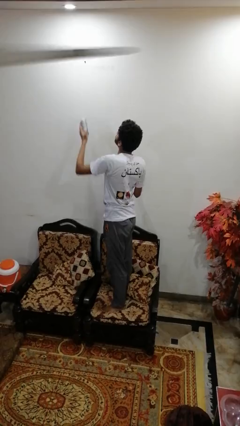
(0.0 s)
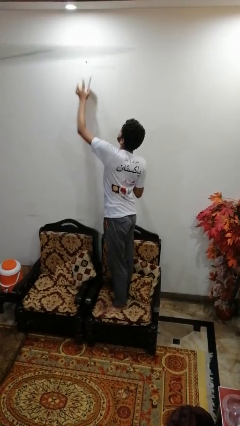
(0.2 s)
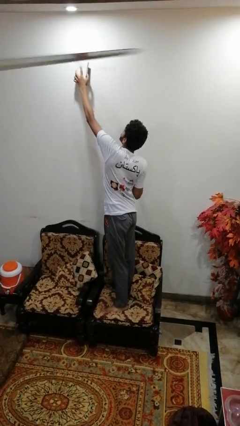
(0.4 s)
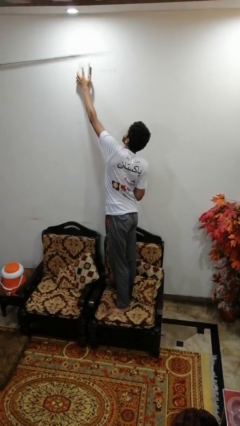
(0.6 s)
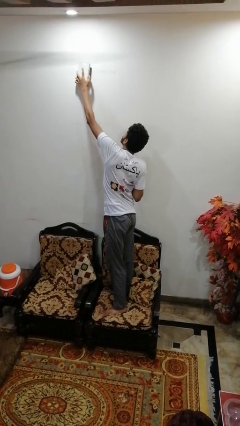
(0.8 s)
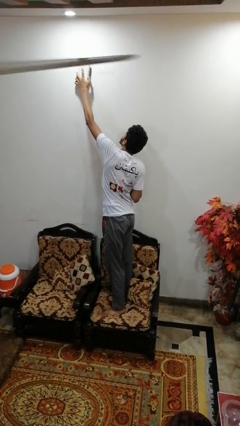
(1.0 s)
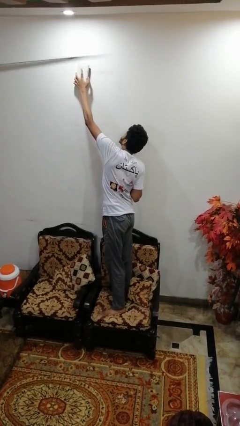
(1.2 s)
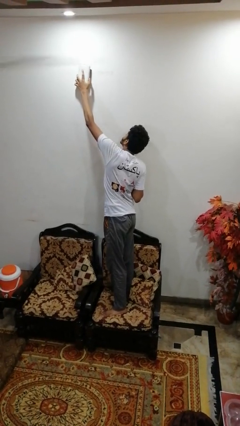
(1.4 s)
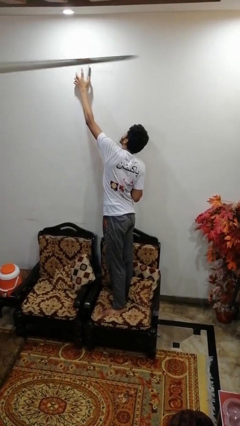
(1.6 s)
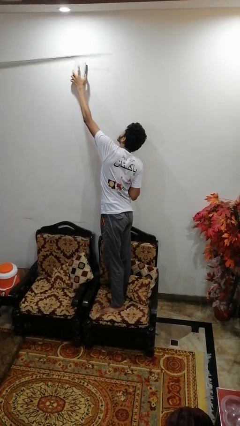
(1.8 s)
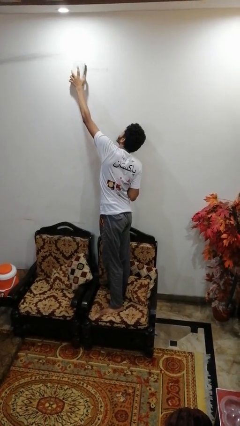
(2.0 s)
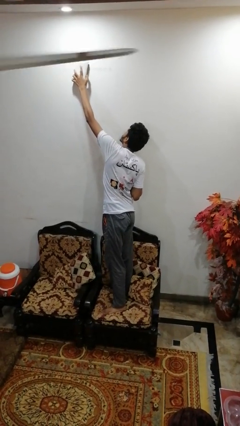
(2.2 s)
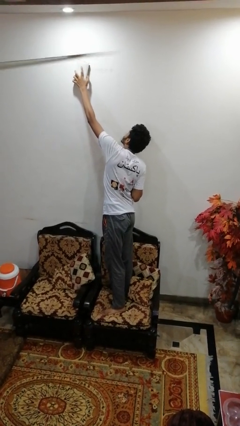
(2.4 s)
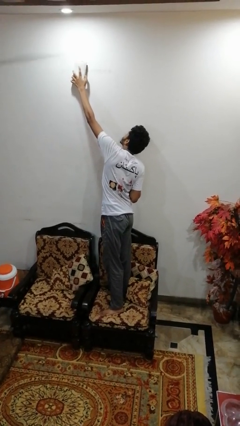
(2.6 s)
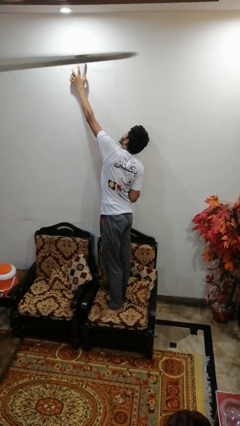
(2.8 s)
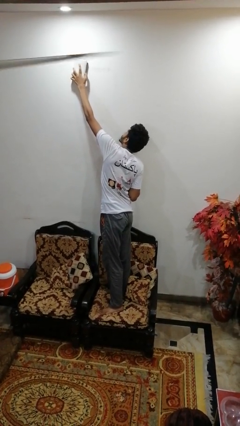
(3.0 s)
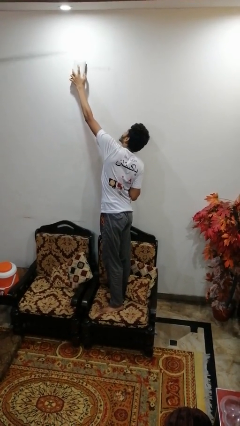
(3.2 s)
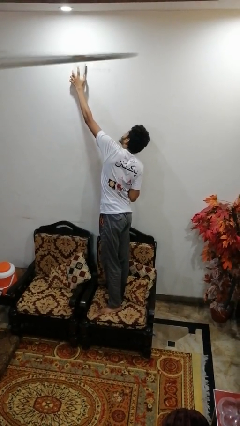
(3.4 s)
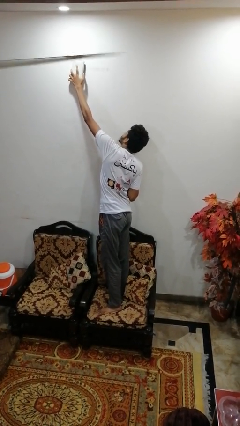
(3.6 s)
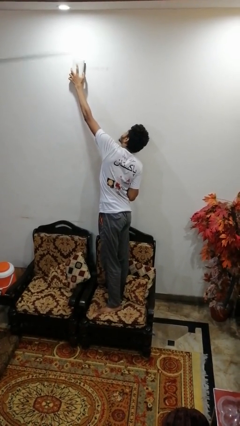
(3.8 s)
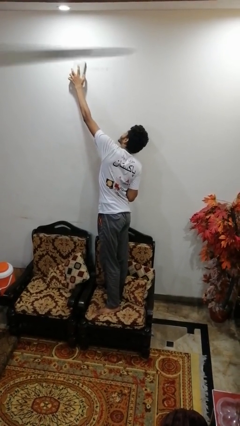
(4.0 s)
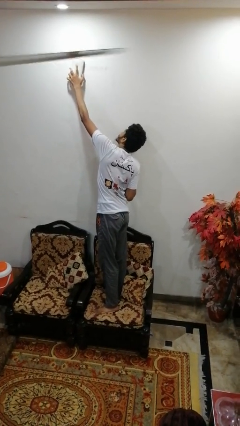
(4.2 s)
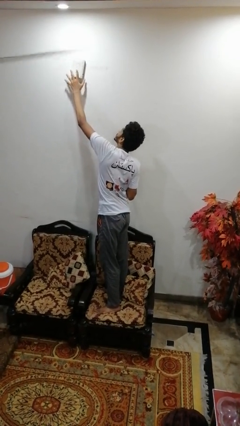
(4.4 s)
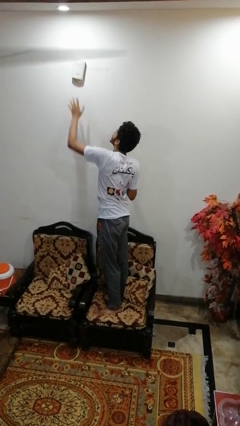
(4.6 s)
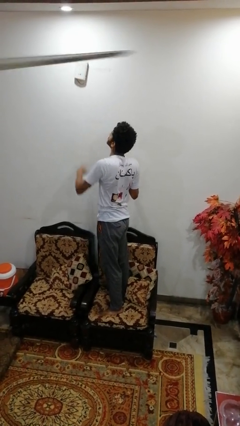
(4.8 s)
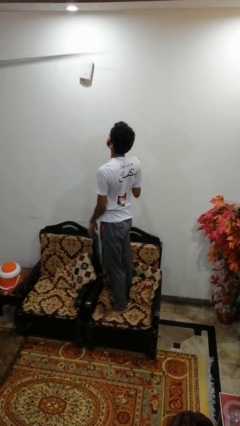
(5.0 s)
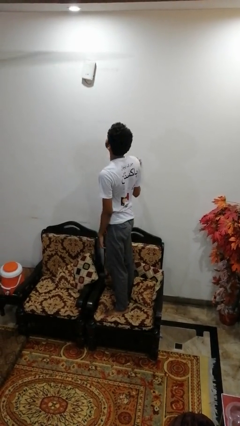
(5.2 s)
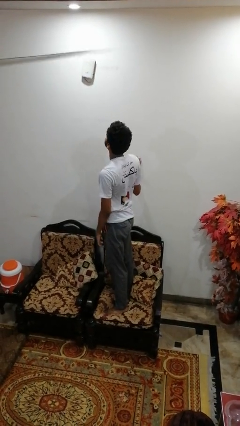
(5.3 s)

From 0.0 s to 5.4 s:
person puts up smoke detector

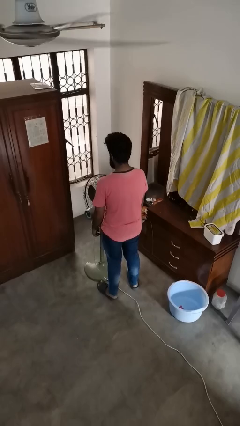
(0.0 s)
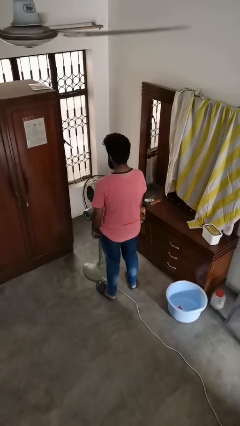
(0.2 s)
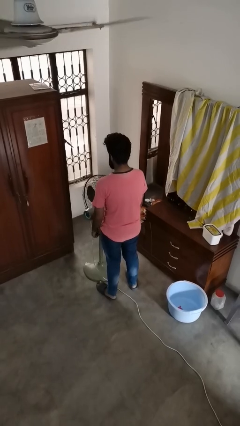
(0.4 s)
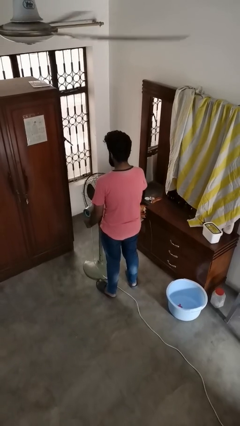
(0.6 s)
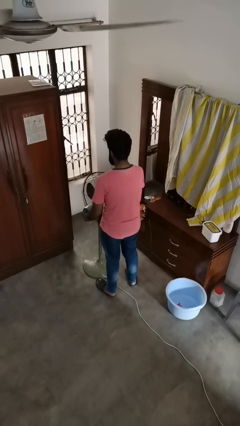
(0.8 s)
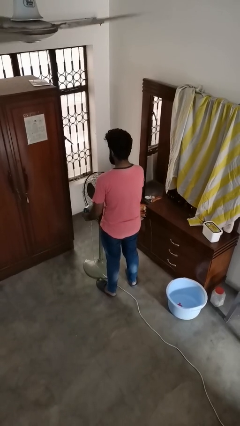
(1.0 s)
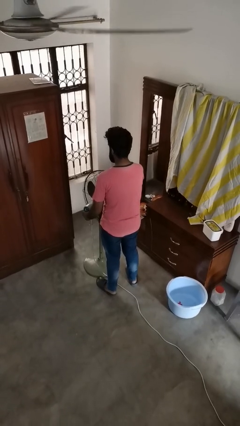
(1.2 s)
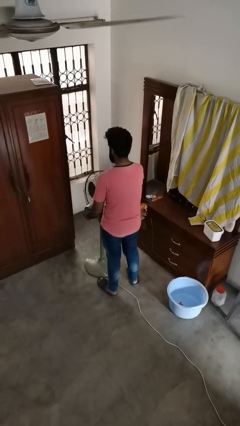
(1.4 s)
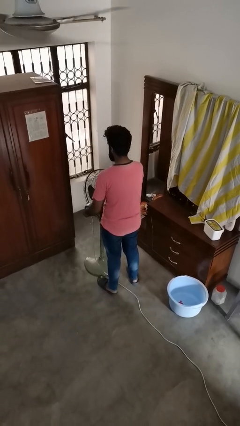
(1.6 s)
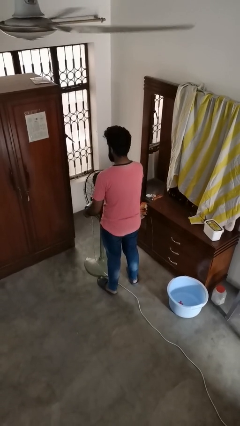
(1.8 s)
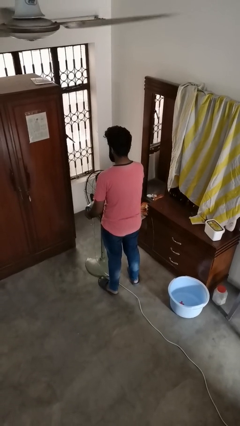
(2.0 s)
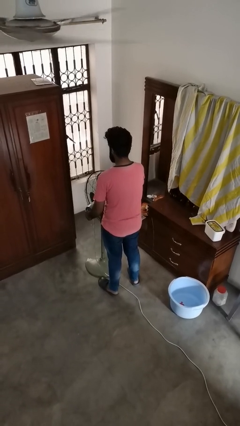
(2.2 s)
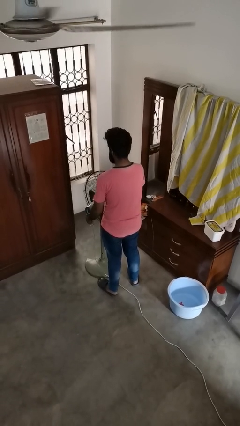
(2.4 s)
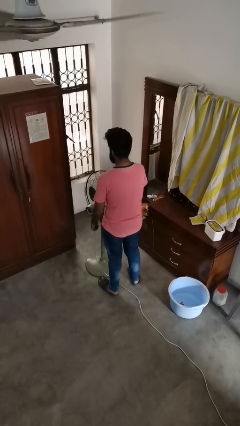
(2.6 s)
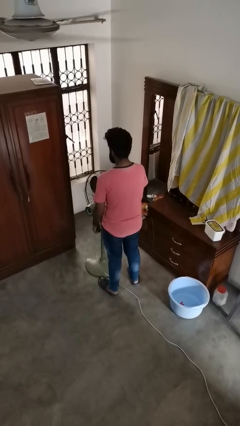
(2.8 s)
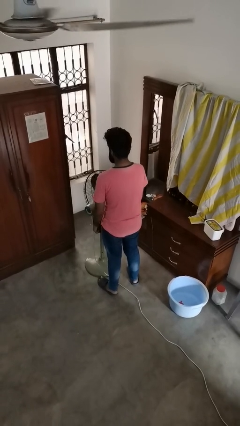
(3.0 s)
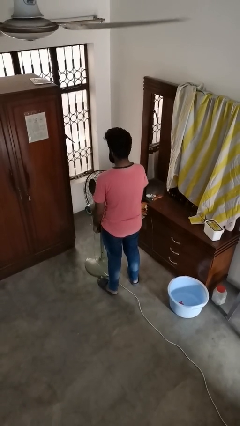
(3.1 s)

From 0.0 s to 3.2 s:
person turns on fan

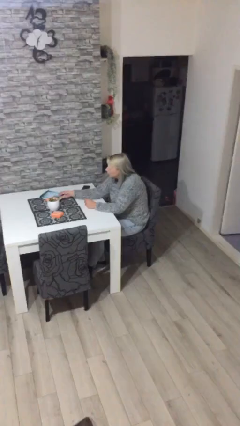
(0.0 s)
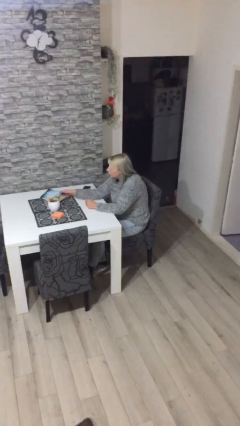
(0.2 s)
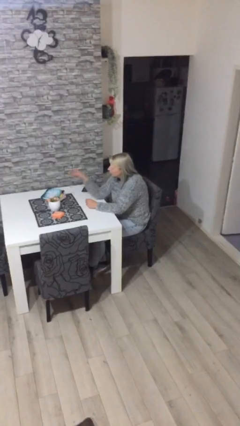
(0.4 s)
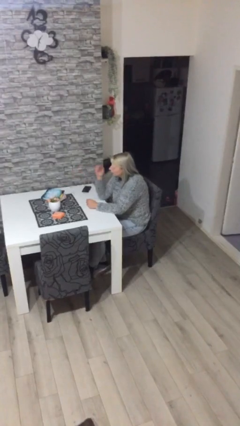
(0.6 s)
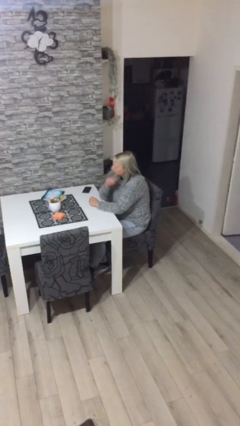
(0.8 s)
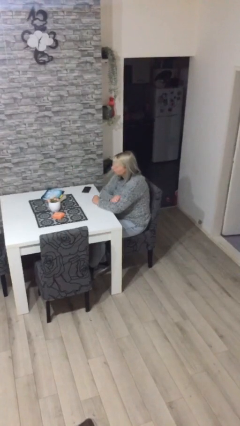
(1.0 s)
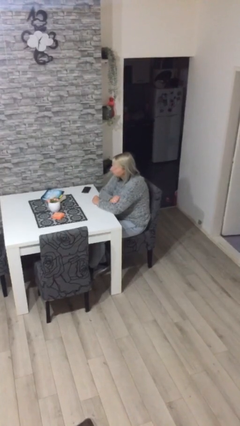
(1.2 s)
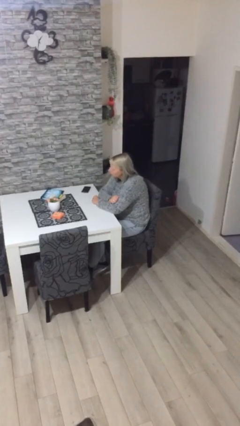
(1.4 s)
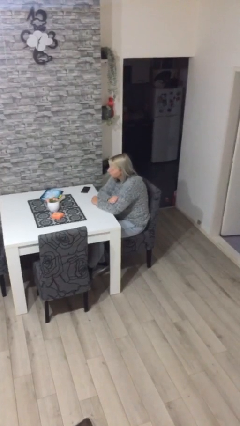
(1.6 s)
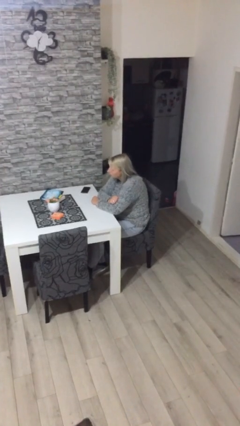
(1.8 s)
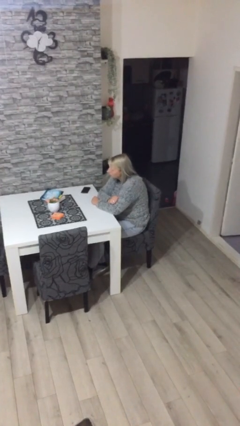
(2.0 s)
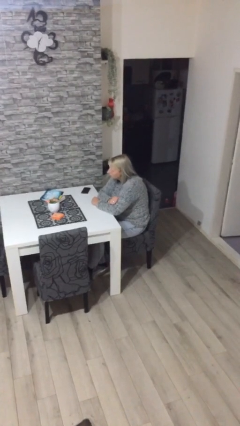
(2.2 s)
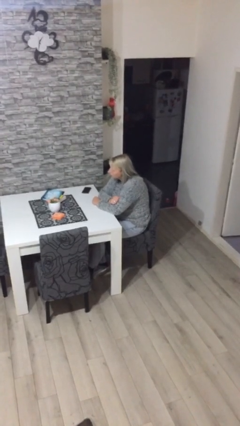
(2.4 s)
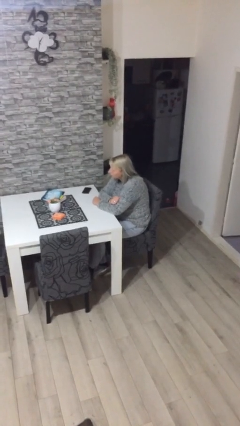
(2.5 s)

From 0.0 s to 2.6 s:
person puts down object on table

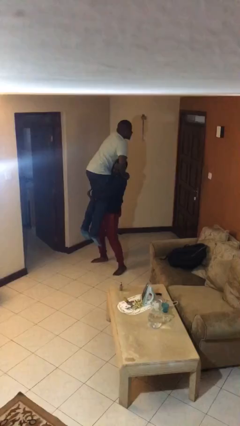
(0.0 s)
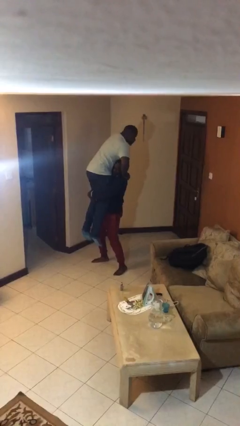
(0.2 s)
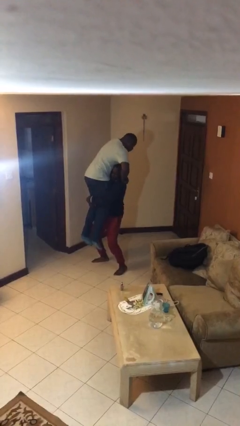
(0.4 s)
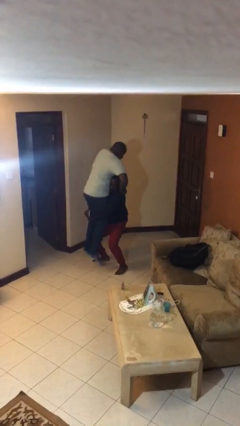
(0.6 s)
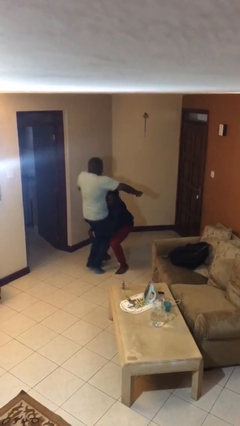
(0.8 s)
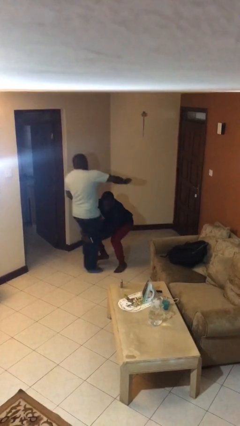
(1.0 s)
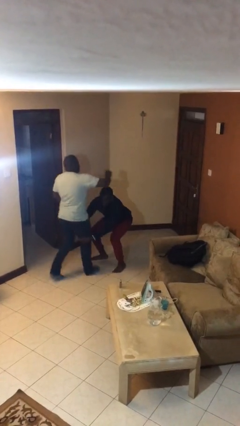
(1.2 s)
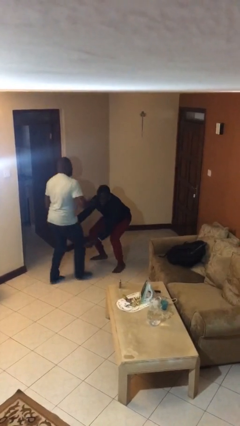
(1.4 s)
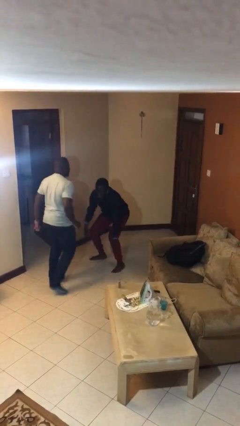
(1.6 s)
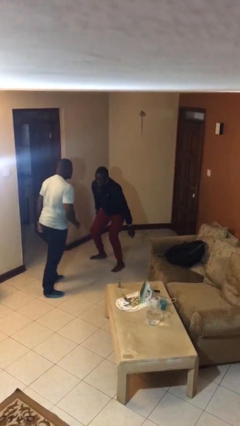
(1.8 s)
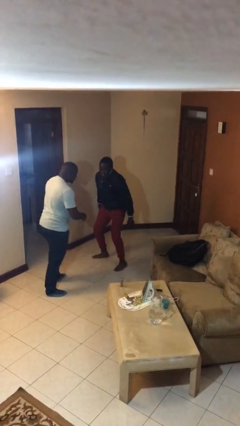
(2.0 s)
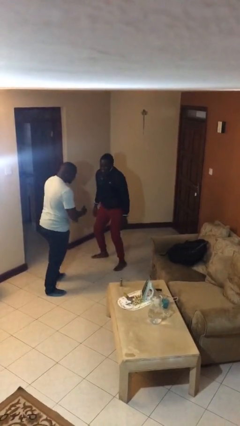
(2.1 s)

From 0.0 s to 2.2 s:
person puts down person

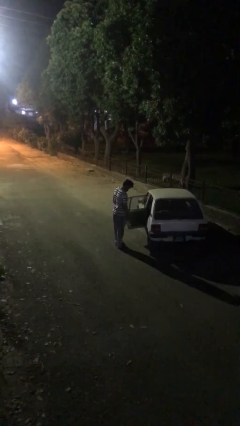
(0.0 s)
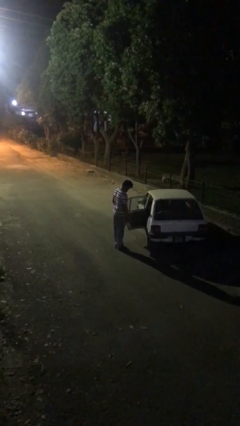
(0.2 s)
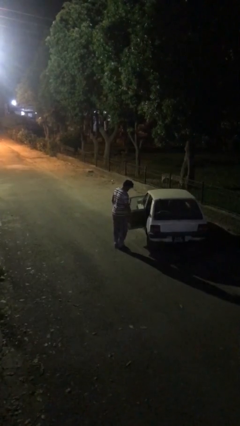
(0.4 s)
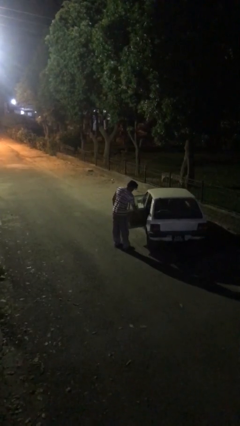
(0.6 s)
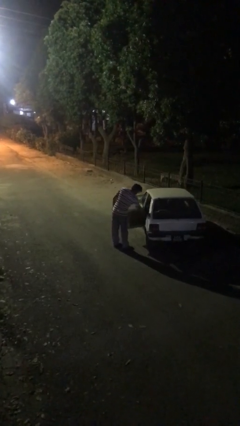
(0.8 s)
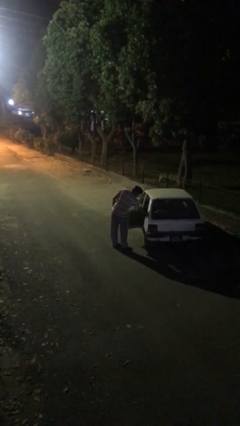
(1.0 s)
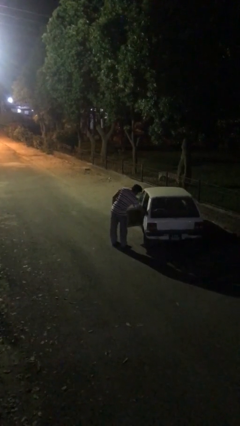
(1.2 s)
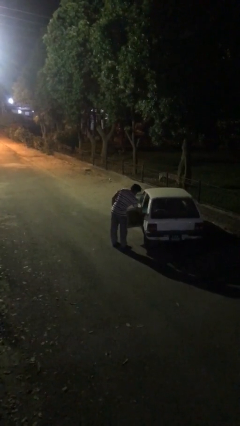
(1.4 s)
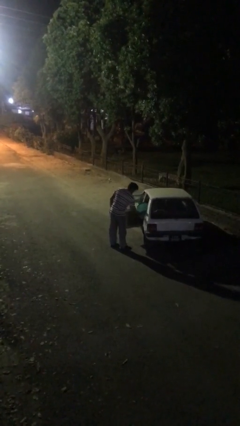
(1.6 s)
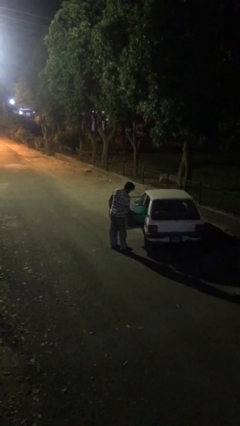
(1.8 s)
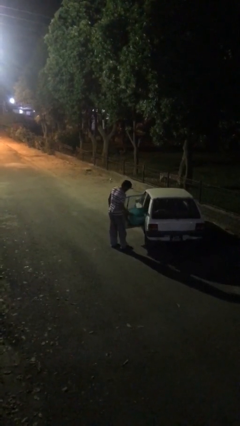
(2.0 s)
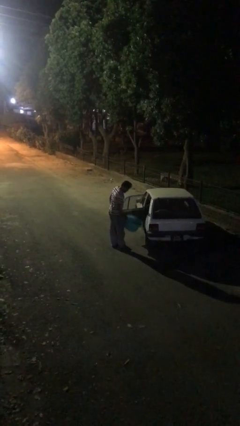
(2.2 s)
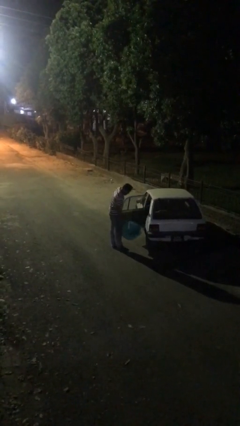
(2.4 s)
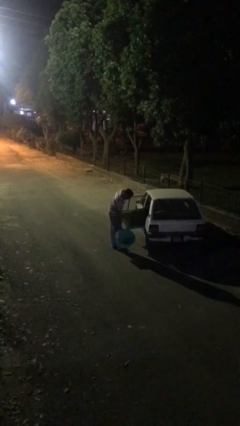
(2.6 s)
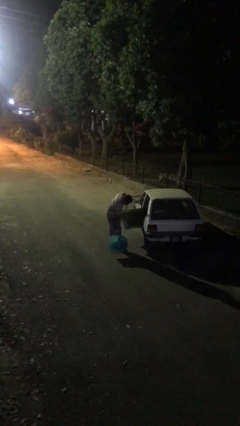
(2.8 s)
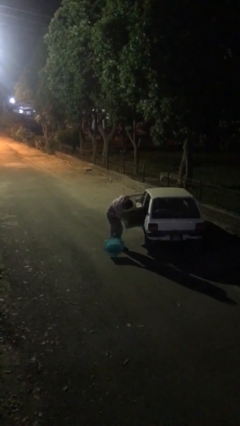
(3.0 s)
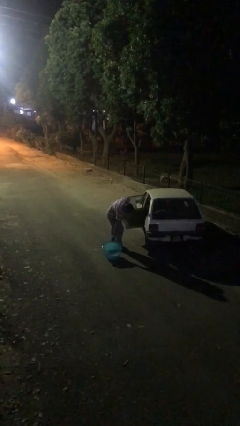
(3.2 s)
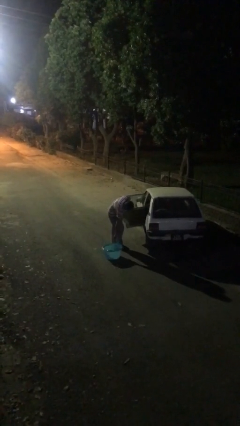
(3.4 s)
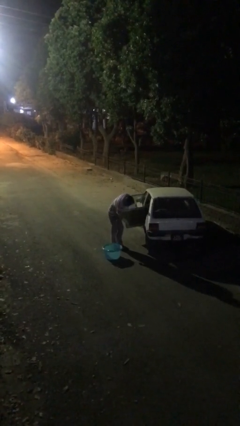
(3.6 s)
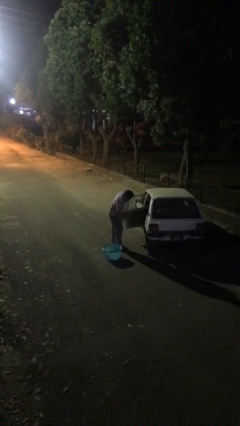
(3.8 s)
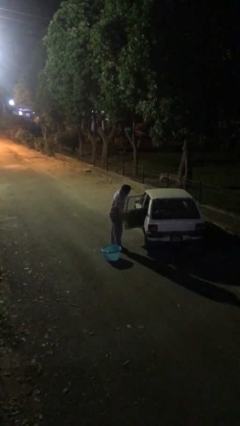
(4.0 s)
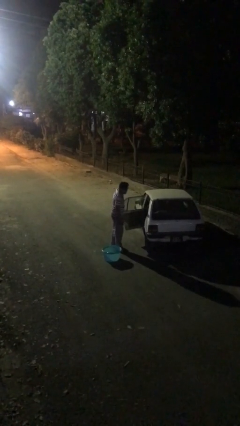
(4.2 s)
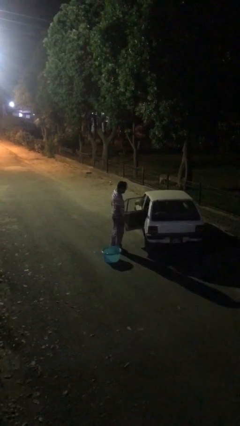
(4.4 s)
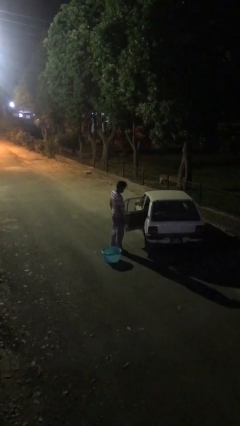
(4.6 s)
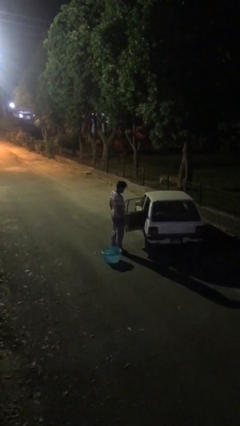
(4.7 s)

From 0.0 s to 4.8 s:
person unloads car
